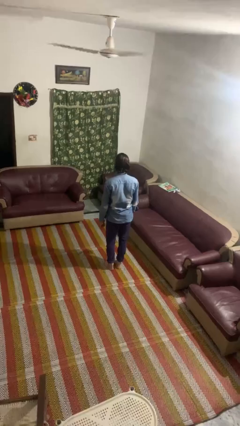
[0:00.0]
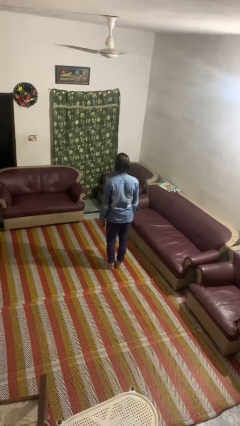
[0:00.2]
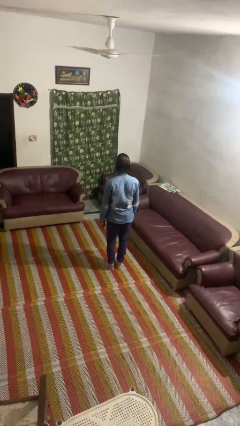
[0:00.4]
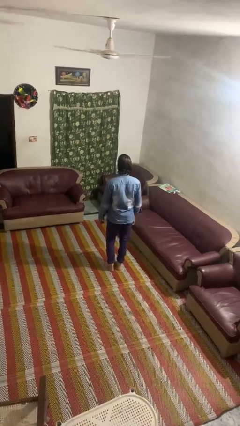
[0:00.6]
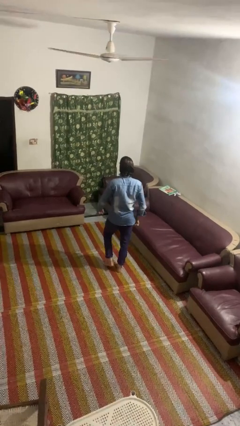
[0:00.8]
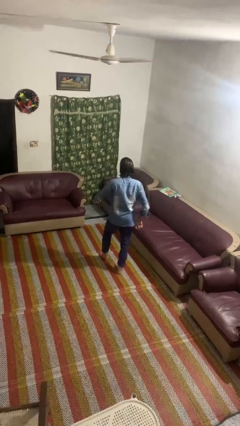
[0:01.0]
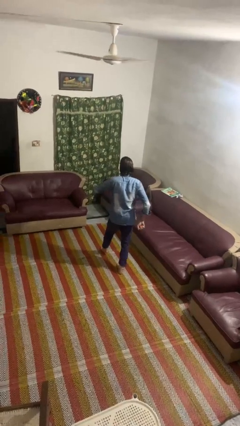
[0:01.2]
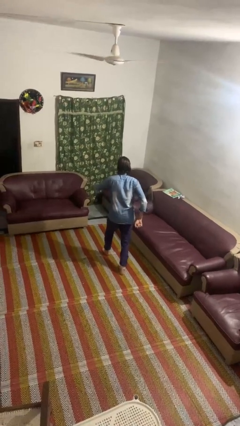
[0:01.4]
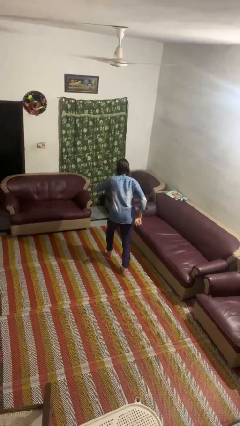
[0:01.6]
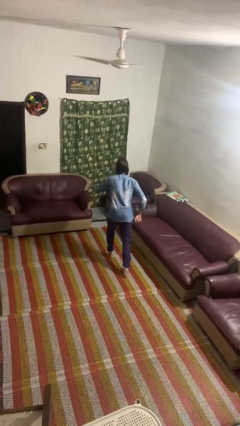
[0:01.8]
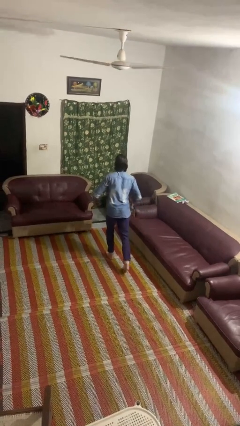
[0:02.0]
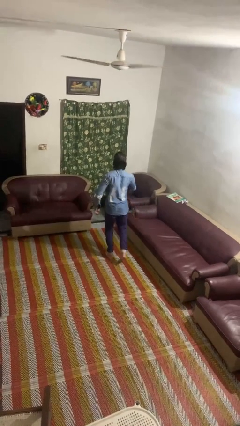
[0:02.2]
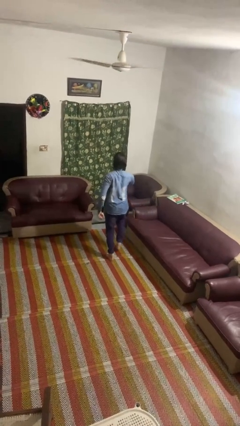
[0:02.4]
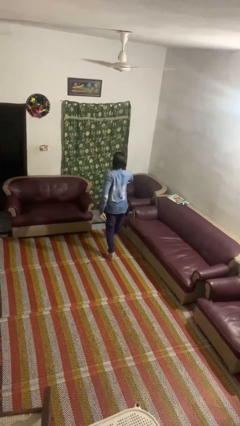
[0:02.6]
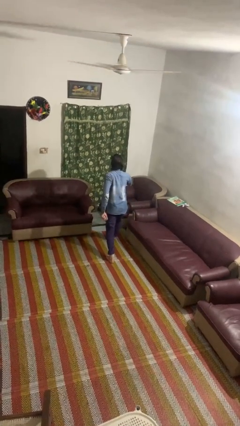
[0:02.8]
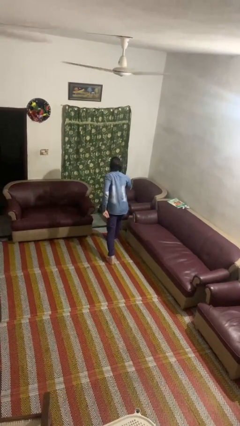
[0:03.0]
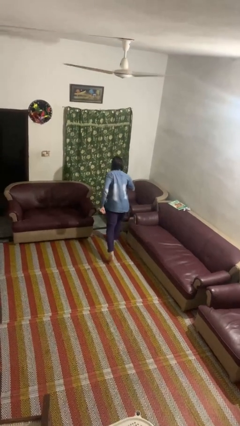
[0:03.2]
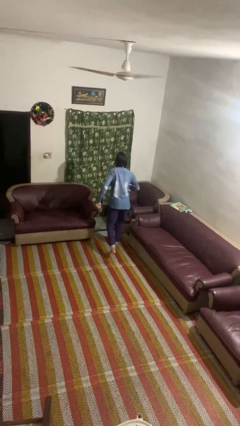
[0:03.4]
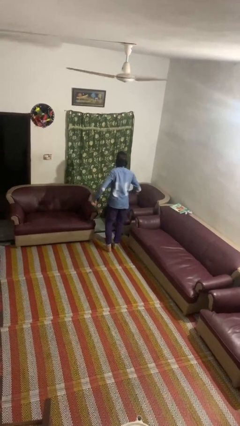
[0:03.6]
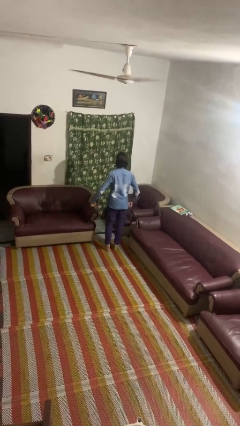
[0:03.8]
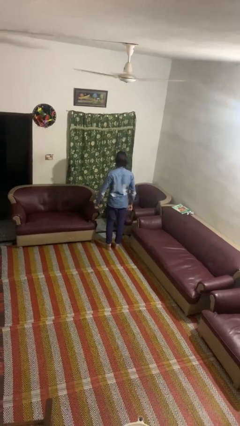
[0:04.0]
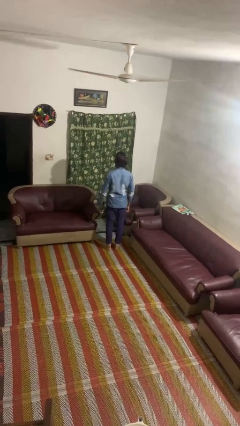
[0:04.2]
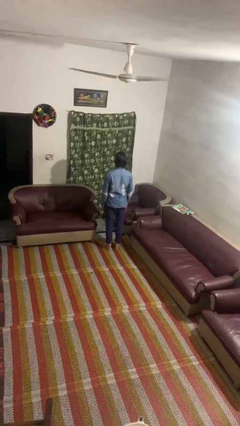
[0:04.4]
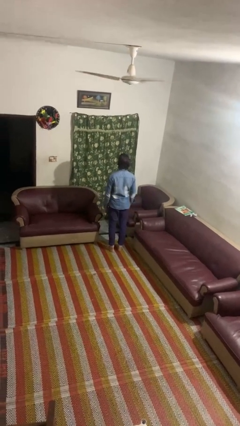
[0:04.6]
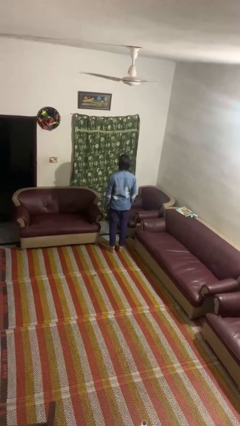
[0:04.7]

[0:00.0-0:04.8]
person walks tiptoe

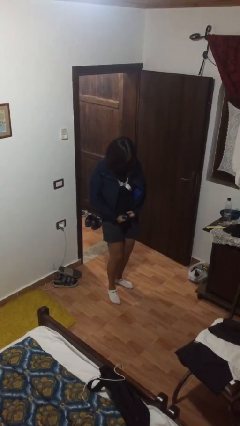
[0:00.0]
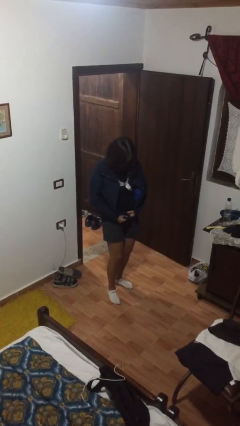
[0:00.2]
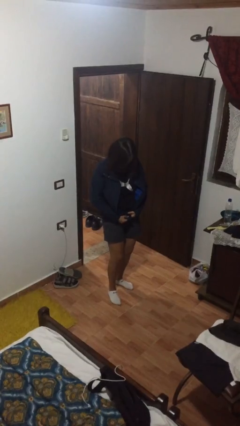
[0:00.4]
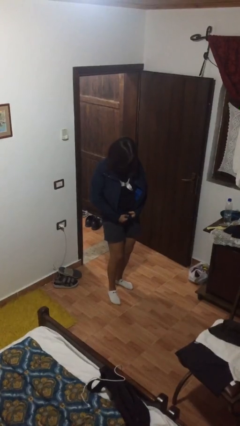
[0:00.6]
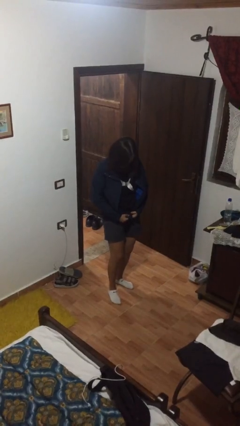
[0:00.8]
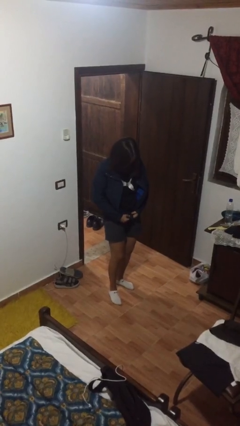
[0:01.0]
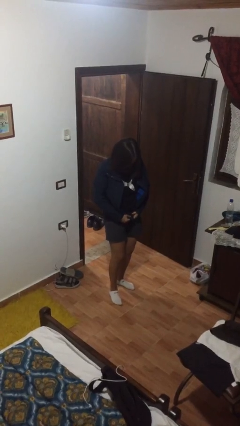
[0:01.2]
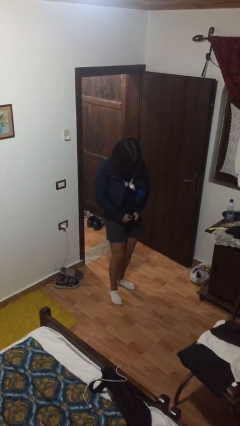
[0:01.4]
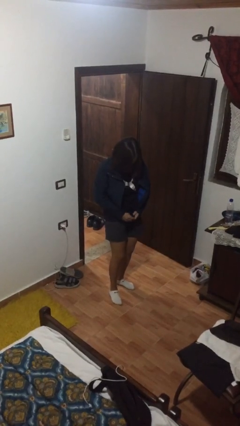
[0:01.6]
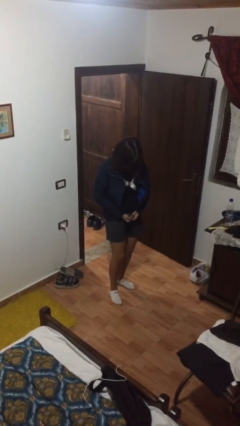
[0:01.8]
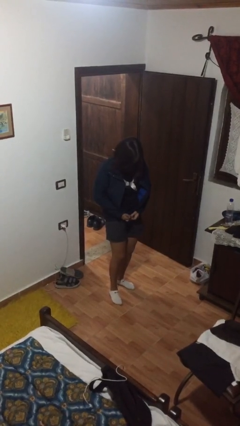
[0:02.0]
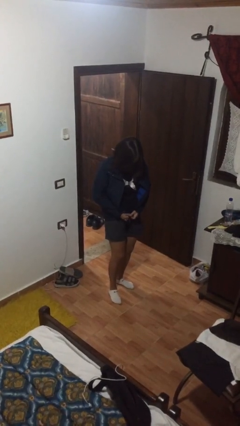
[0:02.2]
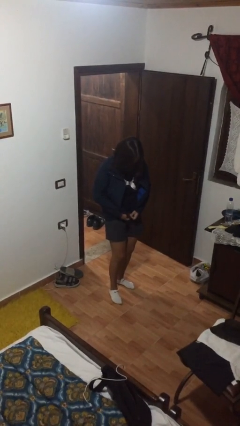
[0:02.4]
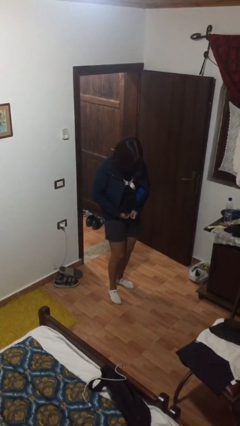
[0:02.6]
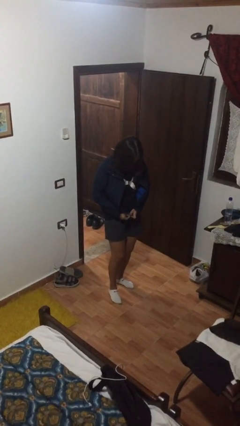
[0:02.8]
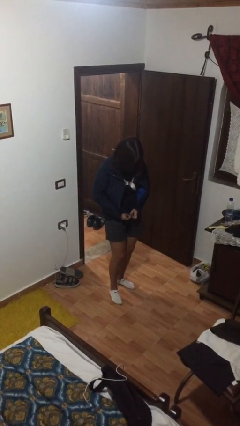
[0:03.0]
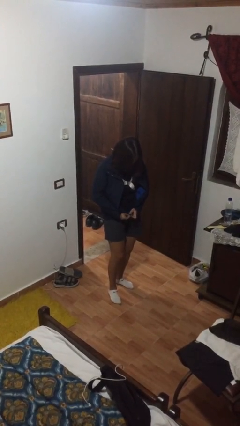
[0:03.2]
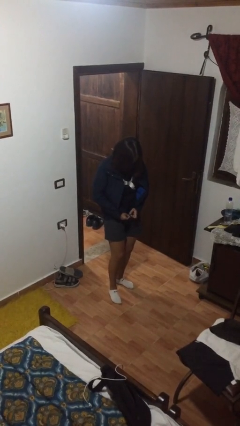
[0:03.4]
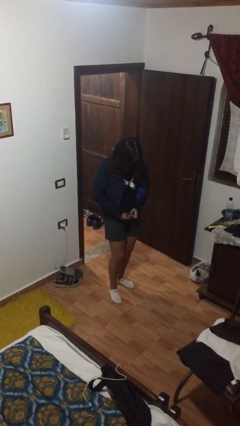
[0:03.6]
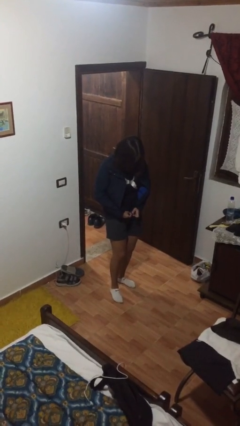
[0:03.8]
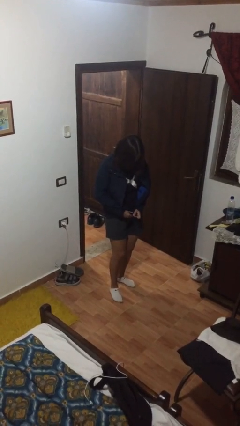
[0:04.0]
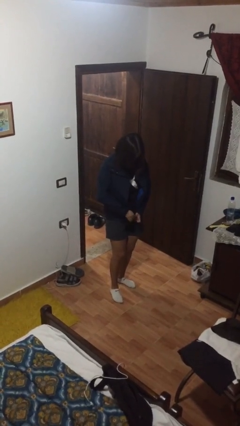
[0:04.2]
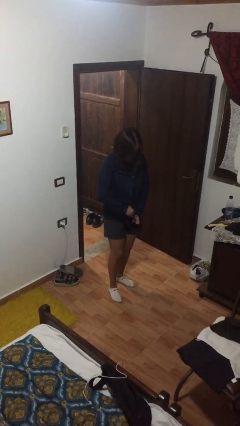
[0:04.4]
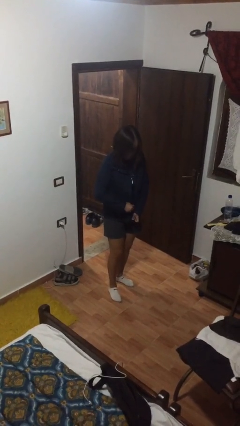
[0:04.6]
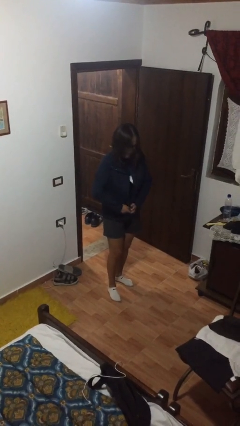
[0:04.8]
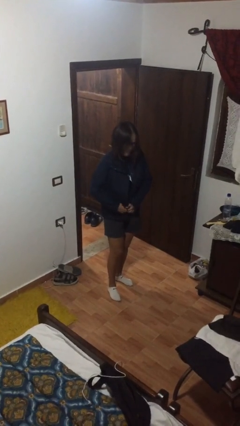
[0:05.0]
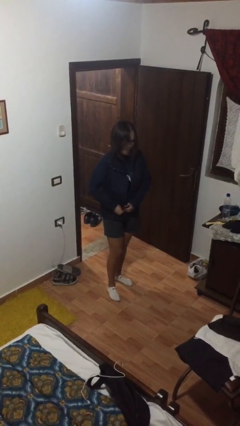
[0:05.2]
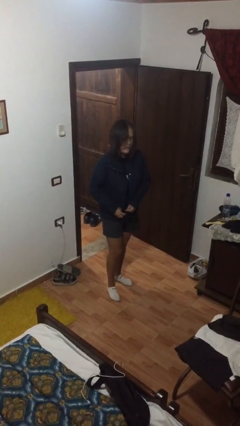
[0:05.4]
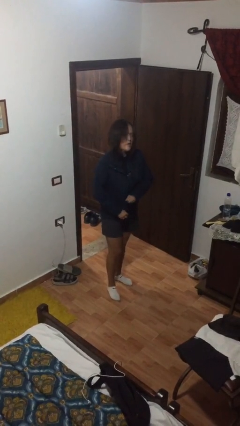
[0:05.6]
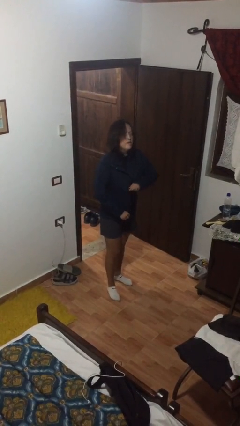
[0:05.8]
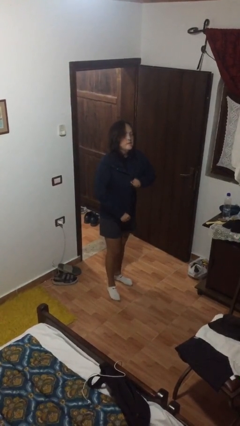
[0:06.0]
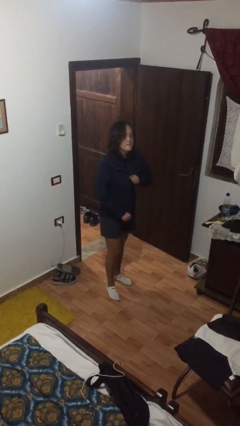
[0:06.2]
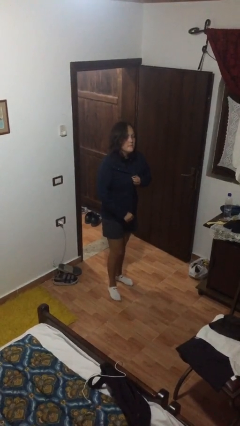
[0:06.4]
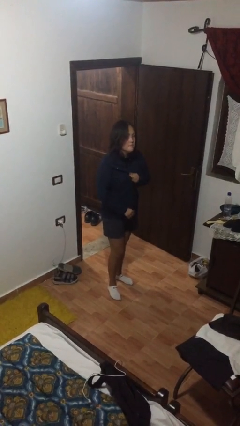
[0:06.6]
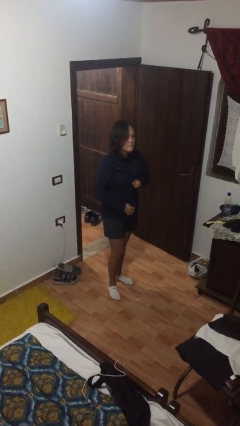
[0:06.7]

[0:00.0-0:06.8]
person zips up jacket

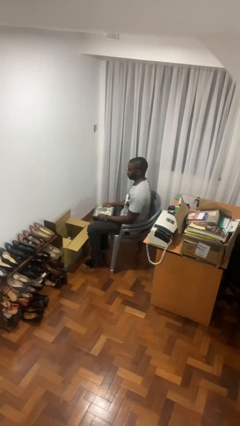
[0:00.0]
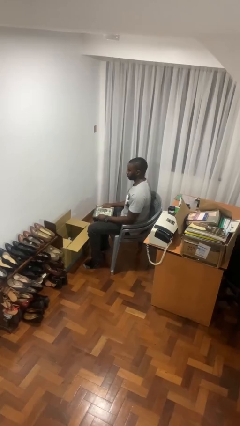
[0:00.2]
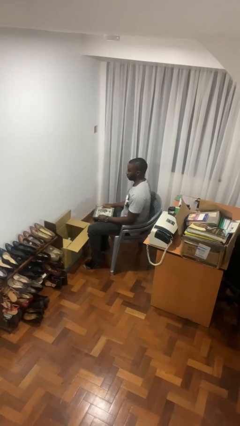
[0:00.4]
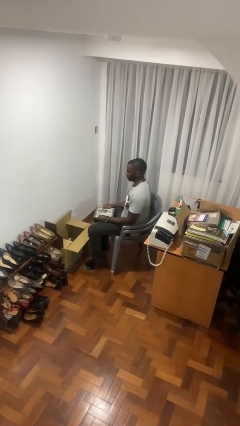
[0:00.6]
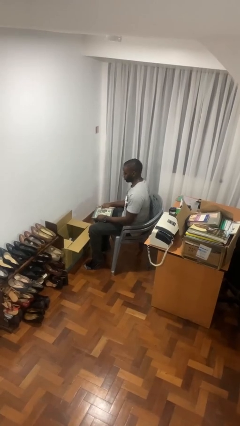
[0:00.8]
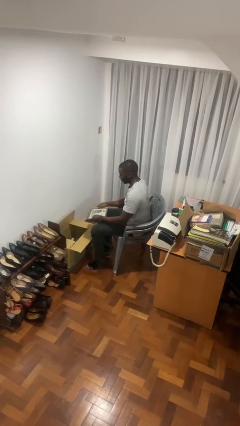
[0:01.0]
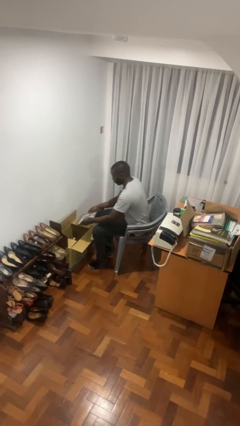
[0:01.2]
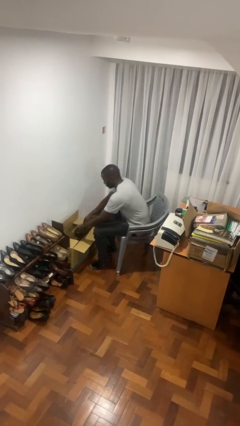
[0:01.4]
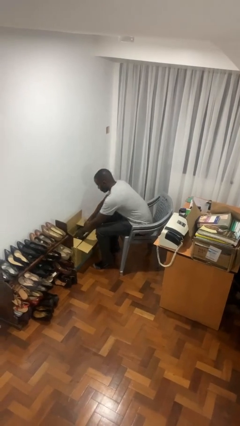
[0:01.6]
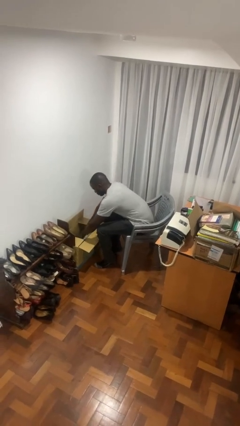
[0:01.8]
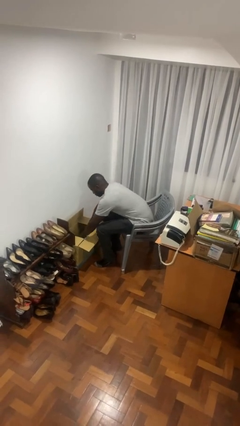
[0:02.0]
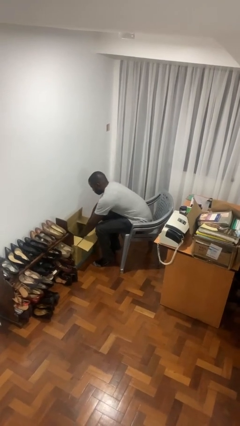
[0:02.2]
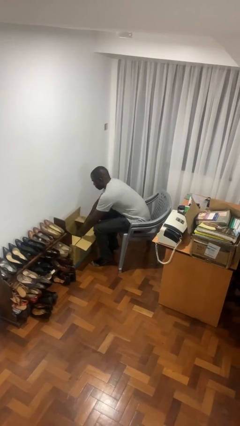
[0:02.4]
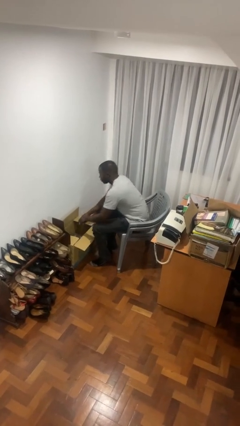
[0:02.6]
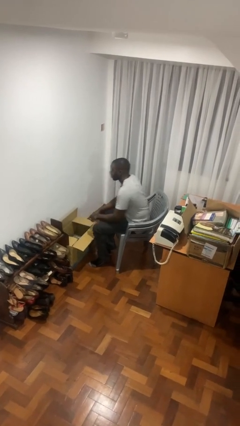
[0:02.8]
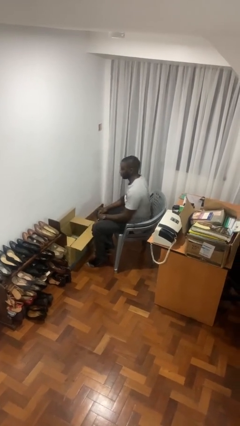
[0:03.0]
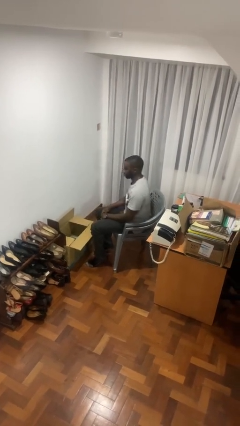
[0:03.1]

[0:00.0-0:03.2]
person puts object into box

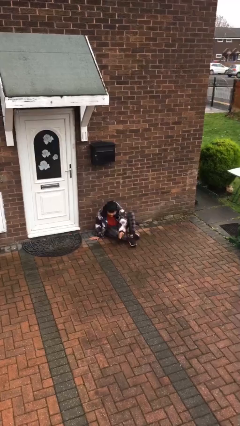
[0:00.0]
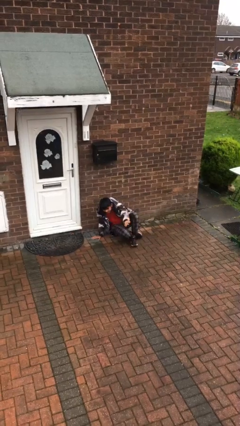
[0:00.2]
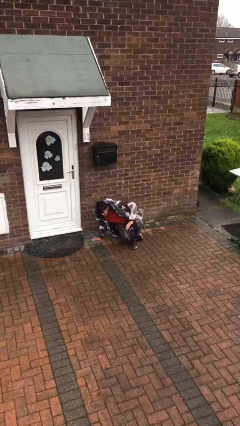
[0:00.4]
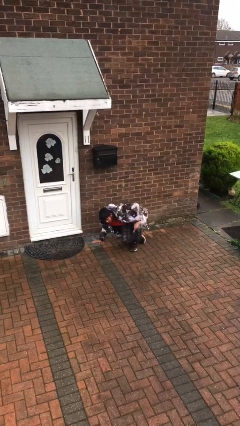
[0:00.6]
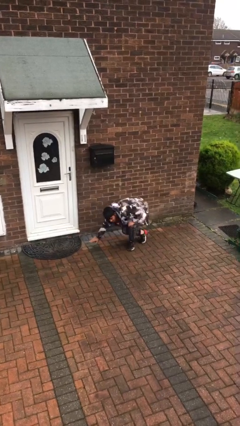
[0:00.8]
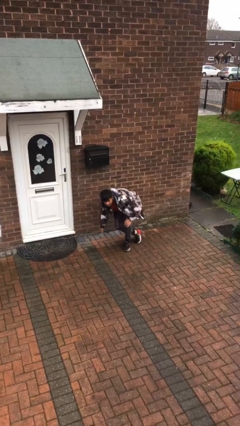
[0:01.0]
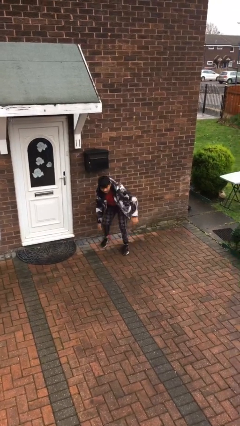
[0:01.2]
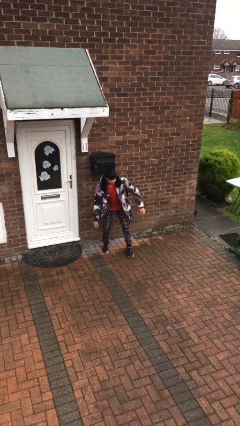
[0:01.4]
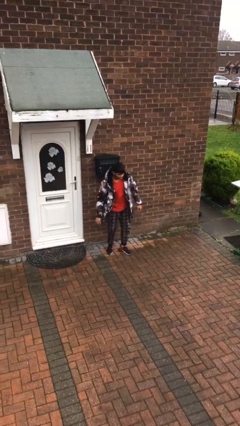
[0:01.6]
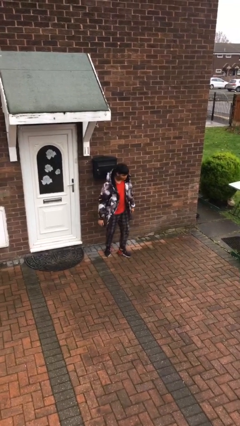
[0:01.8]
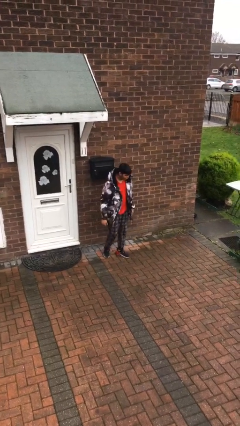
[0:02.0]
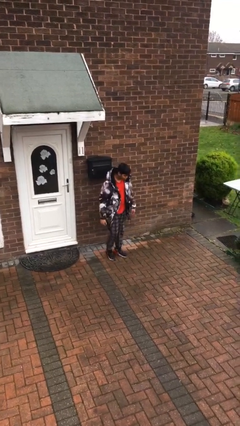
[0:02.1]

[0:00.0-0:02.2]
person stands up

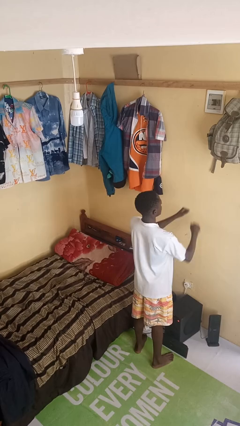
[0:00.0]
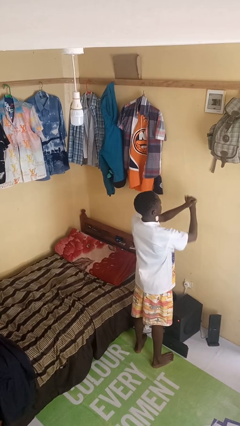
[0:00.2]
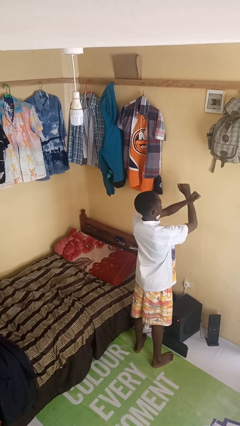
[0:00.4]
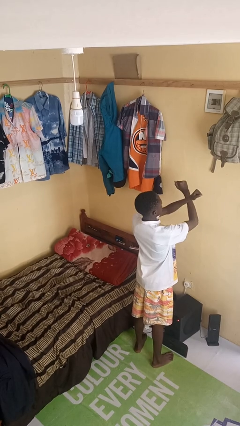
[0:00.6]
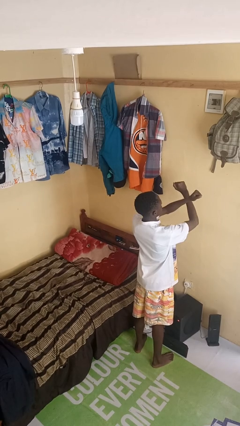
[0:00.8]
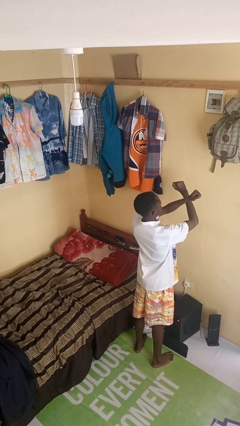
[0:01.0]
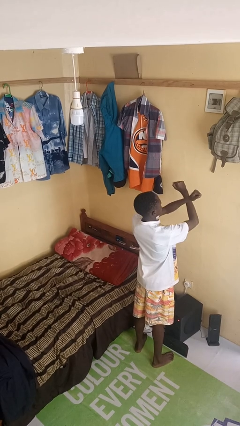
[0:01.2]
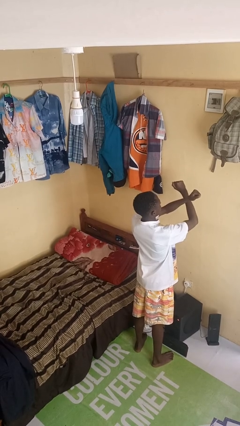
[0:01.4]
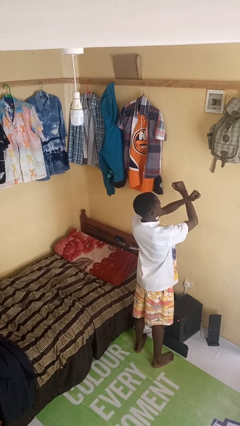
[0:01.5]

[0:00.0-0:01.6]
person gestures arms x
